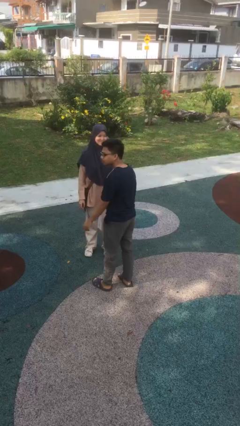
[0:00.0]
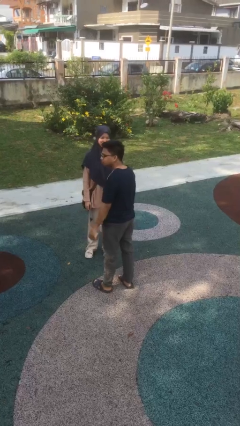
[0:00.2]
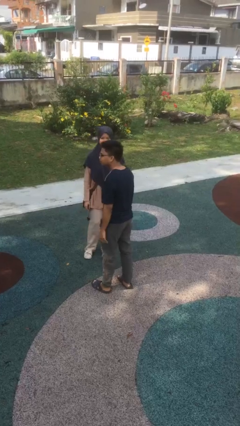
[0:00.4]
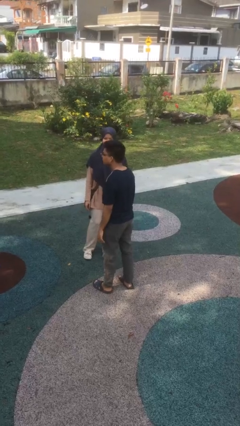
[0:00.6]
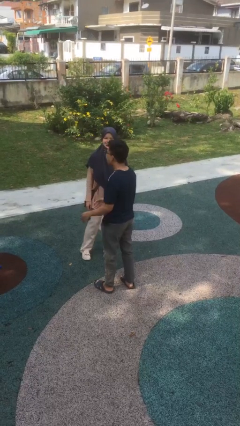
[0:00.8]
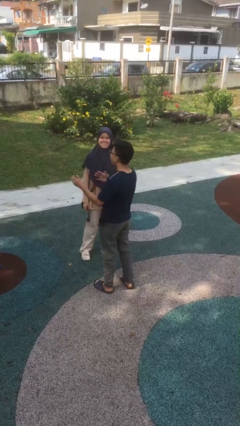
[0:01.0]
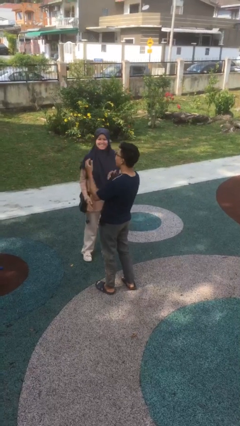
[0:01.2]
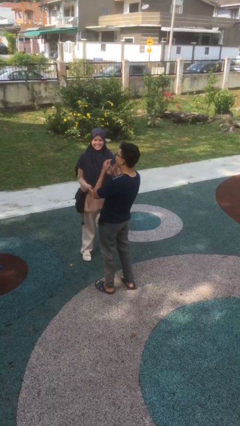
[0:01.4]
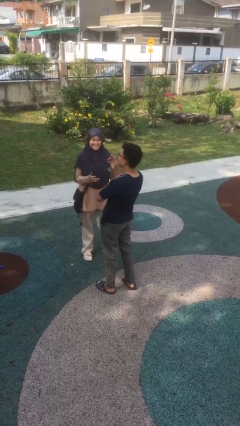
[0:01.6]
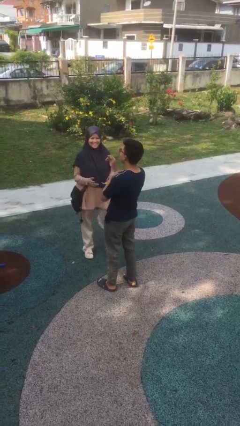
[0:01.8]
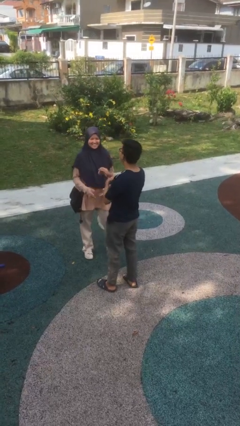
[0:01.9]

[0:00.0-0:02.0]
person laughs with person

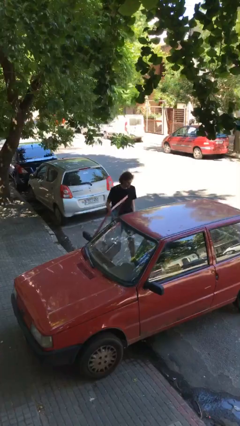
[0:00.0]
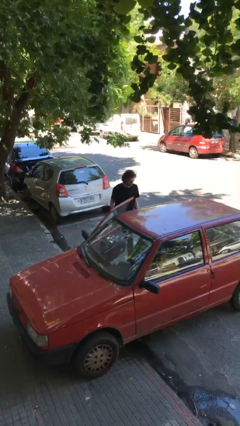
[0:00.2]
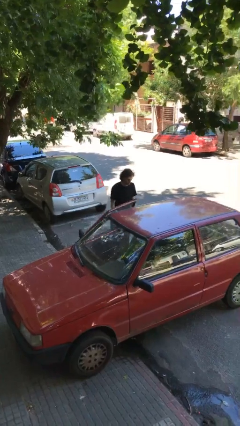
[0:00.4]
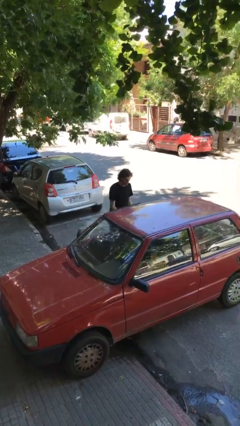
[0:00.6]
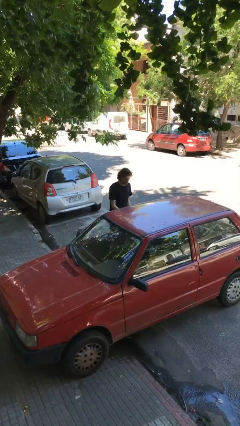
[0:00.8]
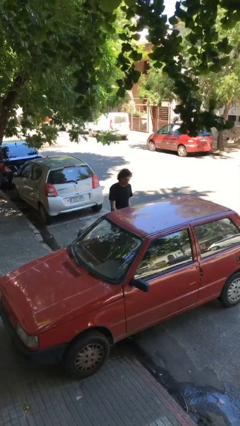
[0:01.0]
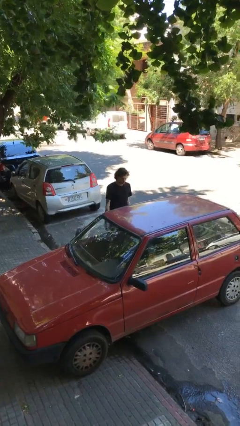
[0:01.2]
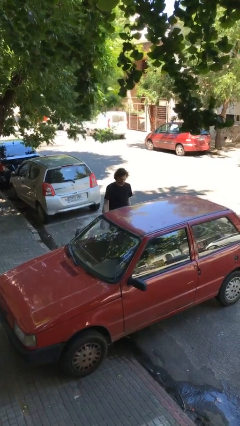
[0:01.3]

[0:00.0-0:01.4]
person closes car door

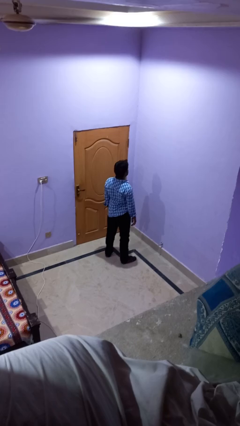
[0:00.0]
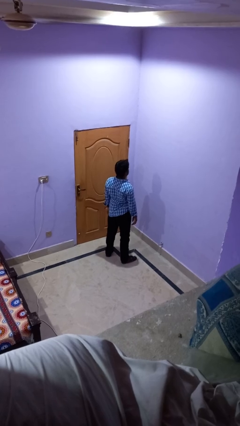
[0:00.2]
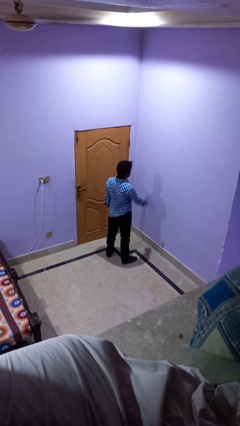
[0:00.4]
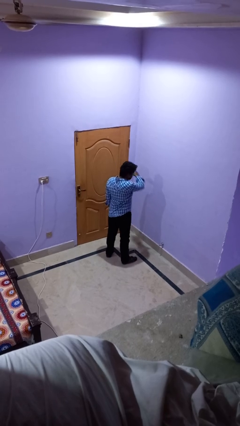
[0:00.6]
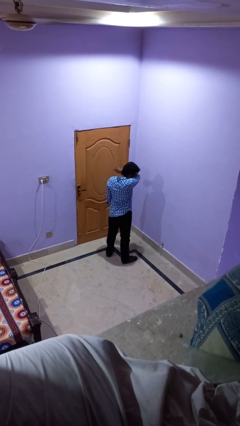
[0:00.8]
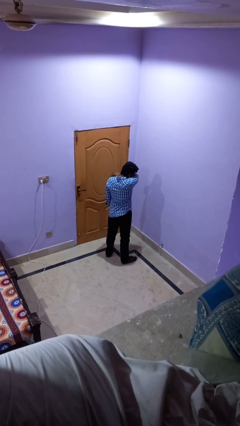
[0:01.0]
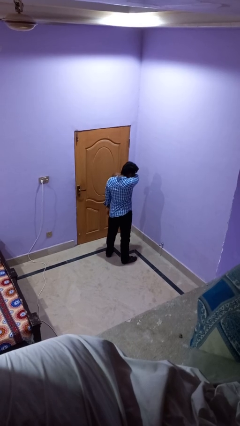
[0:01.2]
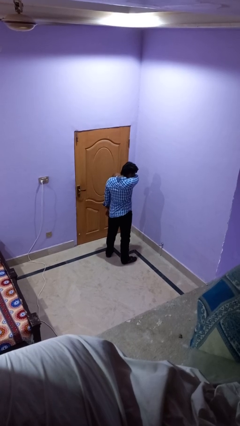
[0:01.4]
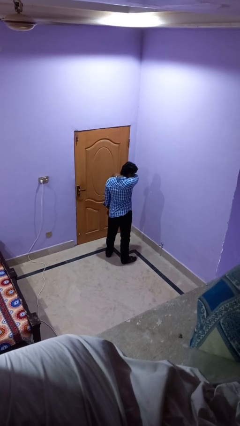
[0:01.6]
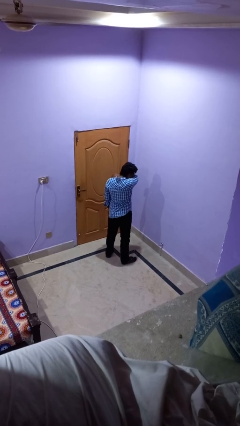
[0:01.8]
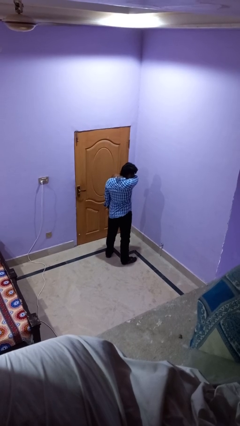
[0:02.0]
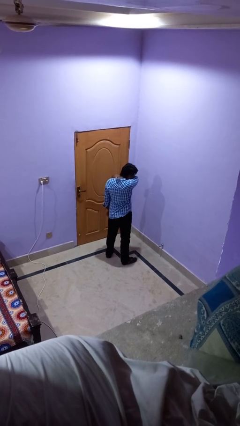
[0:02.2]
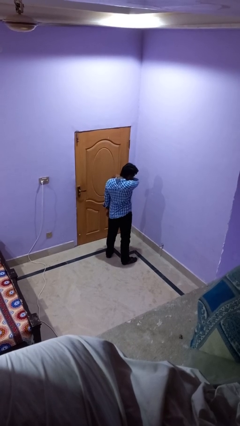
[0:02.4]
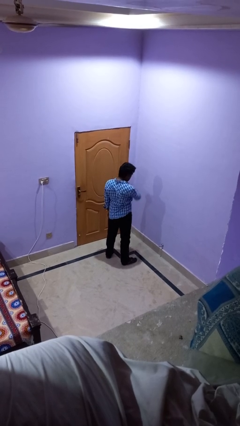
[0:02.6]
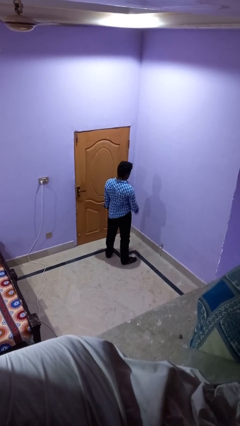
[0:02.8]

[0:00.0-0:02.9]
person sneezes into arm

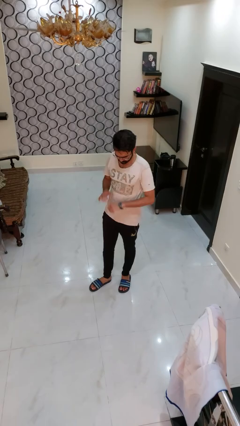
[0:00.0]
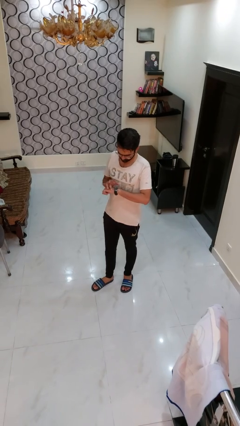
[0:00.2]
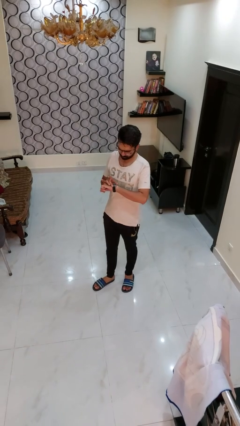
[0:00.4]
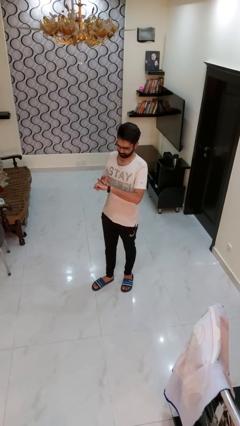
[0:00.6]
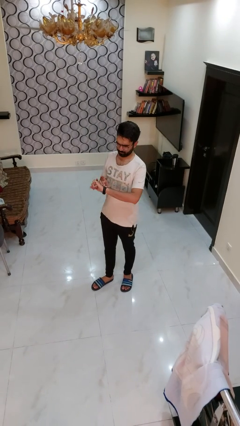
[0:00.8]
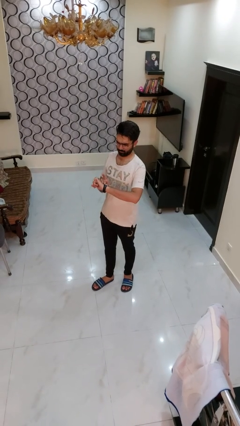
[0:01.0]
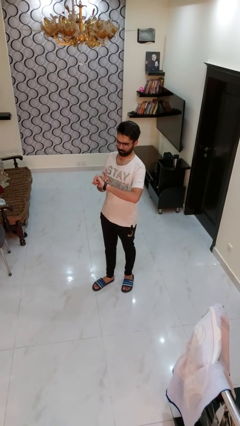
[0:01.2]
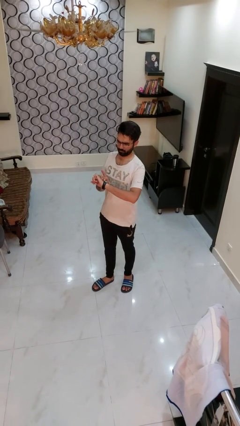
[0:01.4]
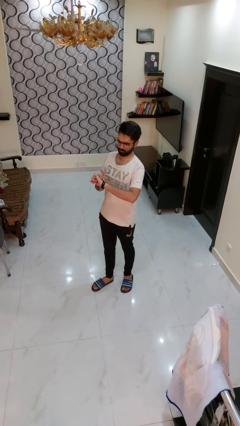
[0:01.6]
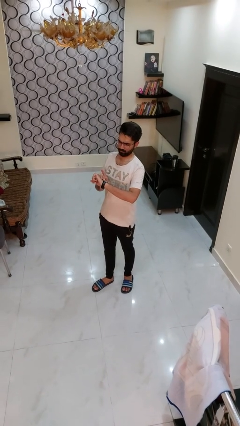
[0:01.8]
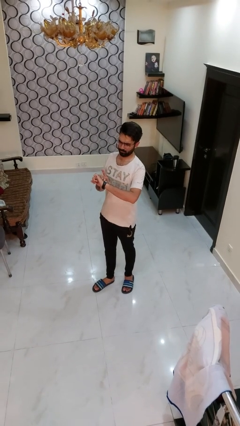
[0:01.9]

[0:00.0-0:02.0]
person looks at wristwatch

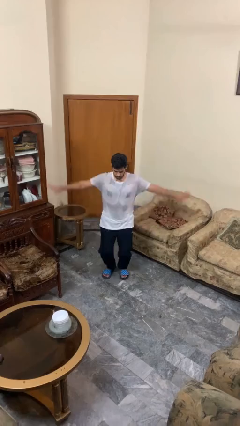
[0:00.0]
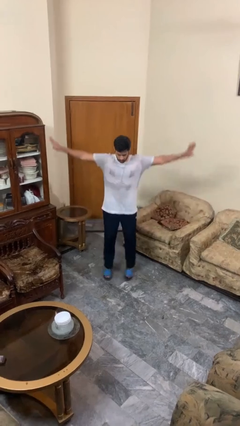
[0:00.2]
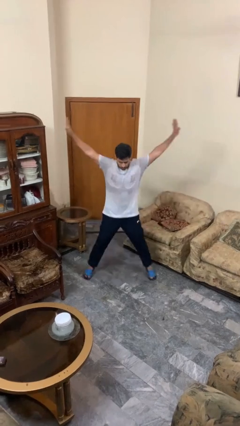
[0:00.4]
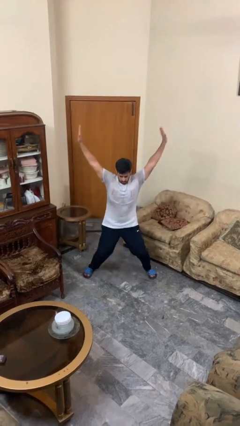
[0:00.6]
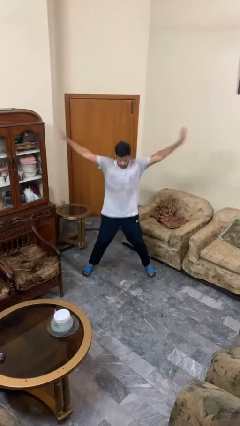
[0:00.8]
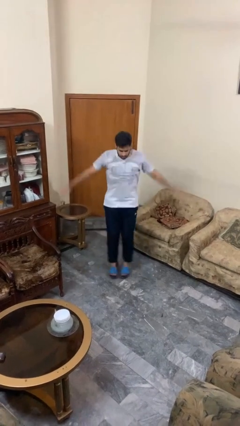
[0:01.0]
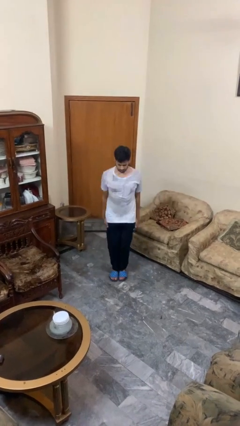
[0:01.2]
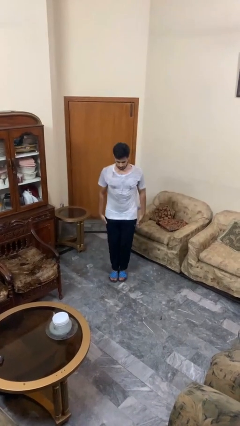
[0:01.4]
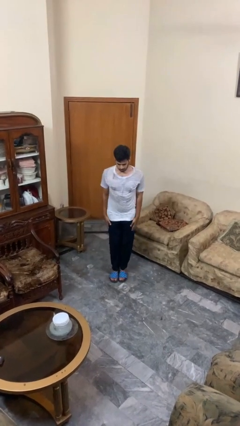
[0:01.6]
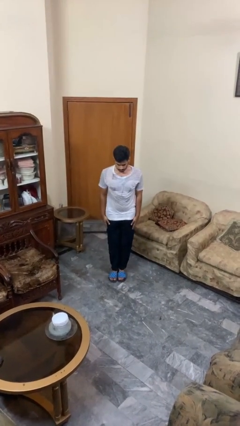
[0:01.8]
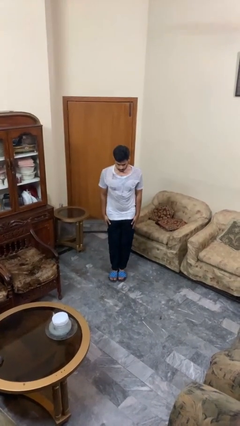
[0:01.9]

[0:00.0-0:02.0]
person exercises with jumping jacks

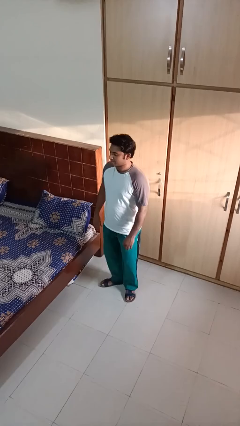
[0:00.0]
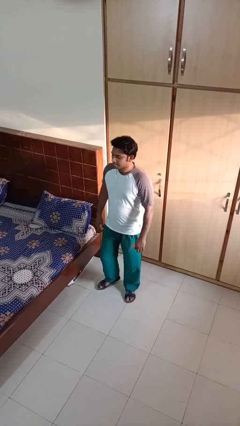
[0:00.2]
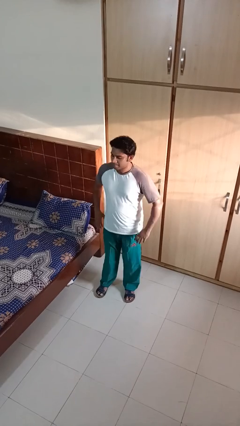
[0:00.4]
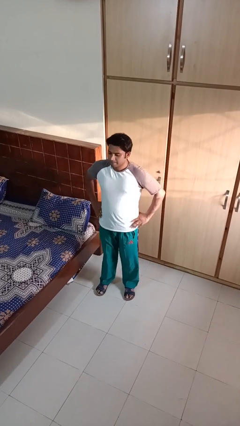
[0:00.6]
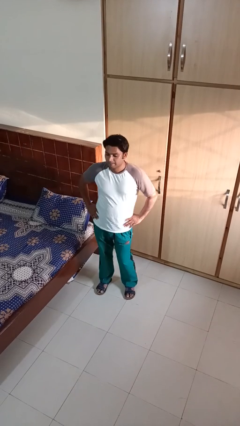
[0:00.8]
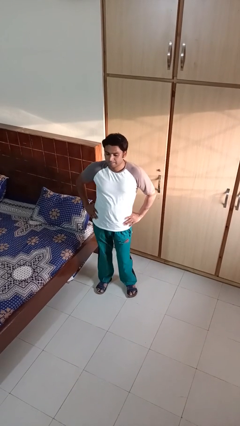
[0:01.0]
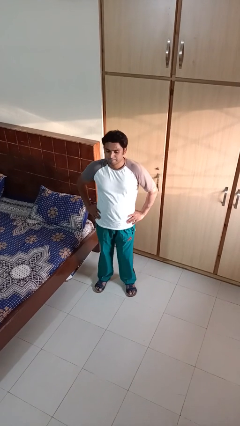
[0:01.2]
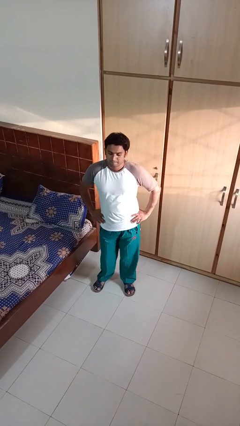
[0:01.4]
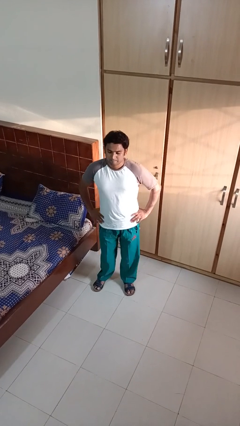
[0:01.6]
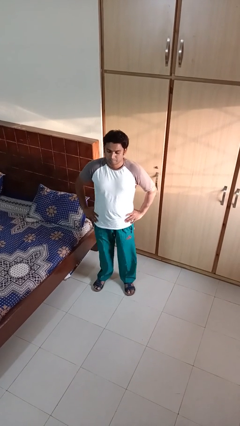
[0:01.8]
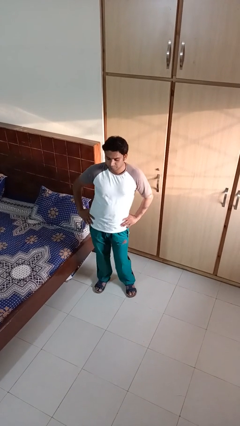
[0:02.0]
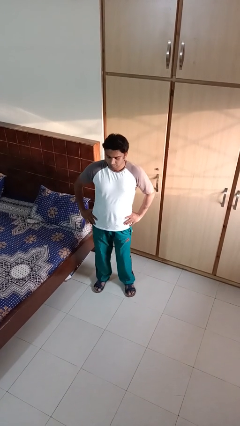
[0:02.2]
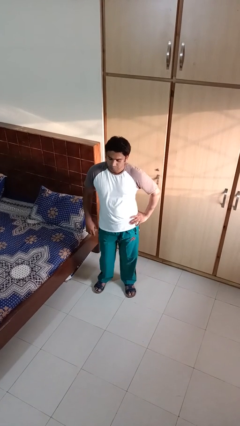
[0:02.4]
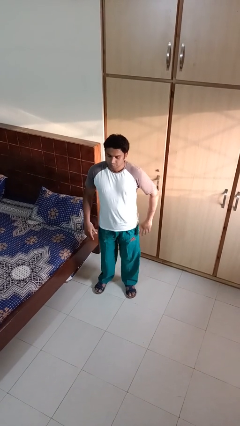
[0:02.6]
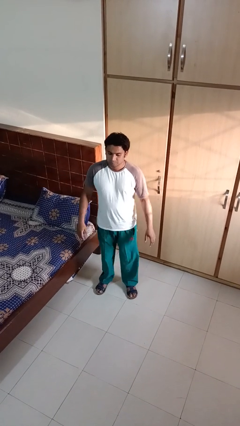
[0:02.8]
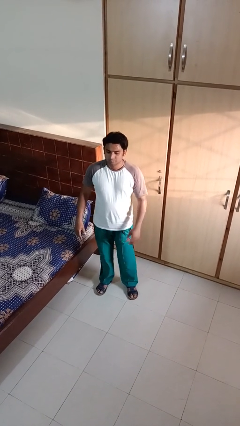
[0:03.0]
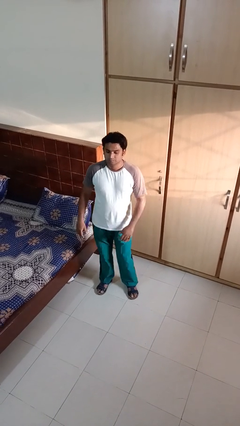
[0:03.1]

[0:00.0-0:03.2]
person wiggles hips

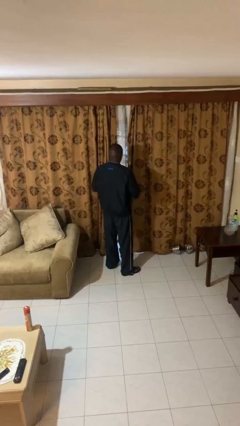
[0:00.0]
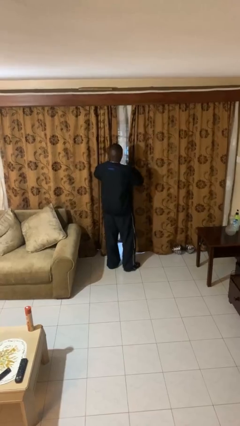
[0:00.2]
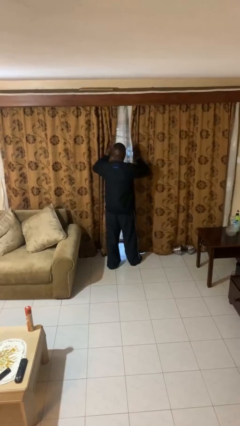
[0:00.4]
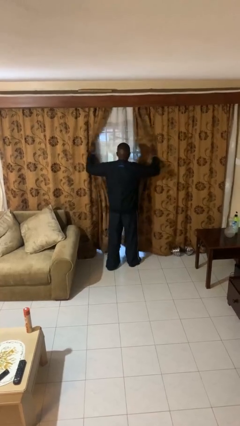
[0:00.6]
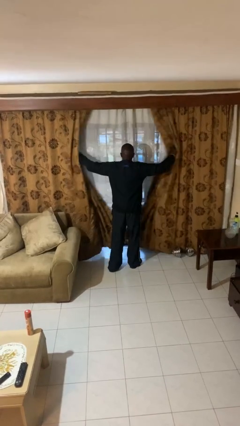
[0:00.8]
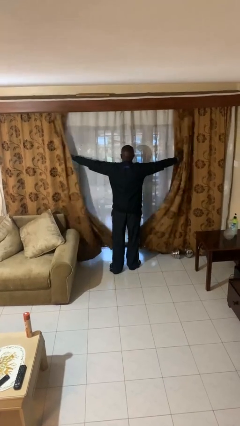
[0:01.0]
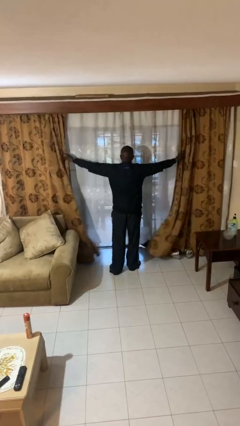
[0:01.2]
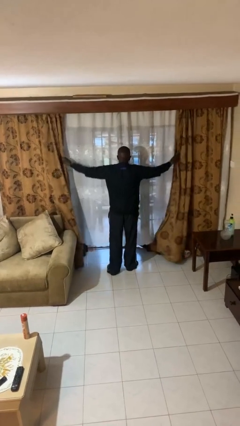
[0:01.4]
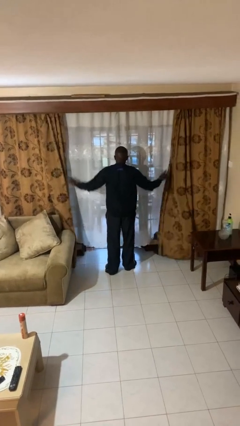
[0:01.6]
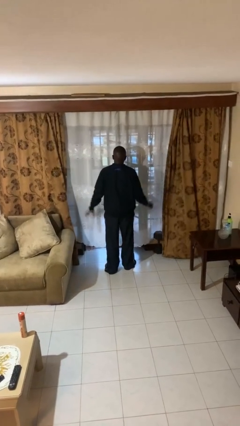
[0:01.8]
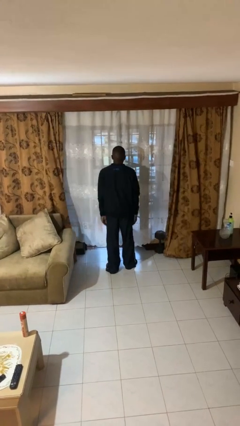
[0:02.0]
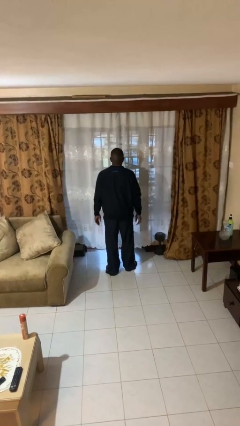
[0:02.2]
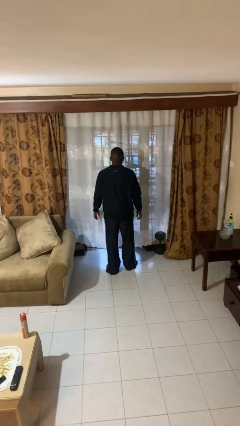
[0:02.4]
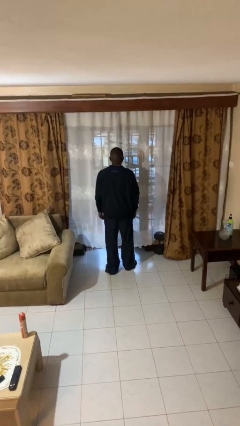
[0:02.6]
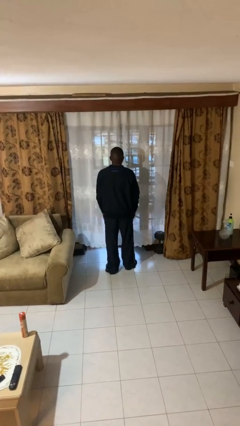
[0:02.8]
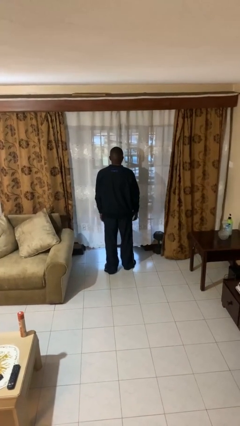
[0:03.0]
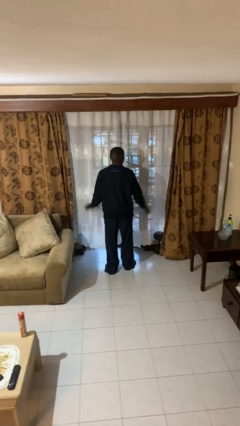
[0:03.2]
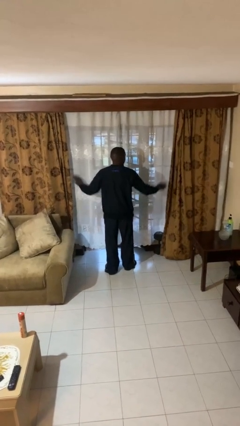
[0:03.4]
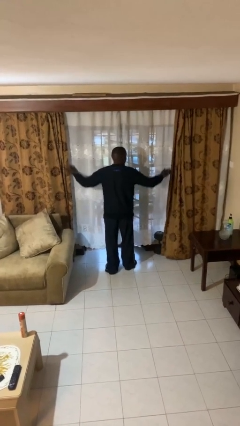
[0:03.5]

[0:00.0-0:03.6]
person opens curtains
